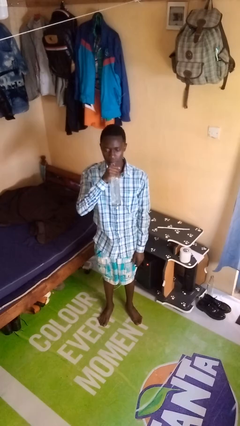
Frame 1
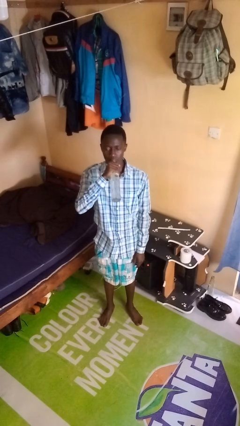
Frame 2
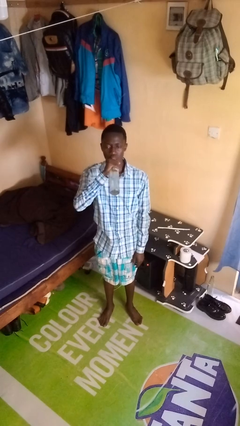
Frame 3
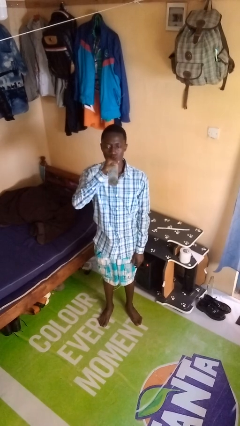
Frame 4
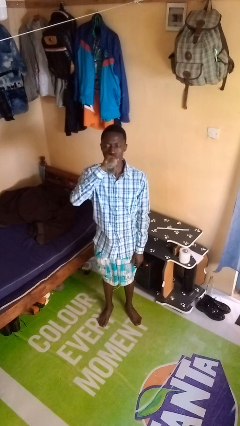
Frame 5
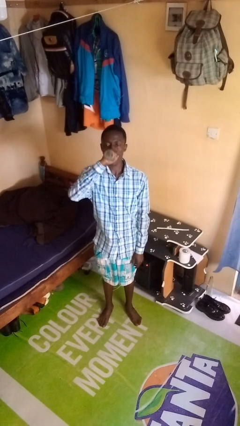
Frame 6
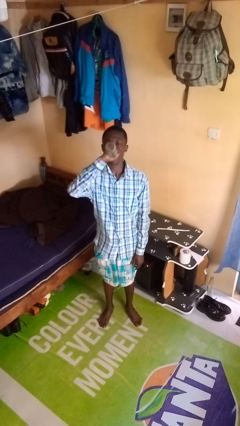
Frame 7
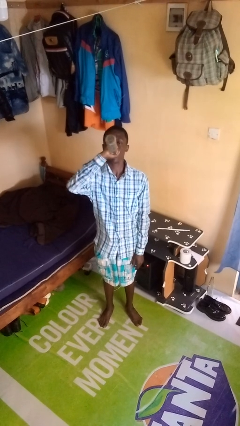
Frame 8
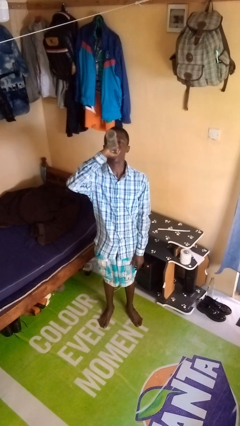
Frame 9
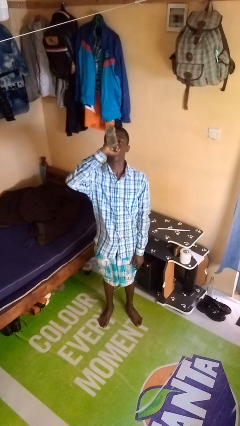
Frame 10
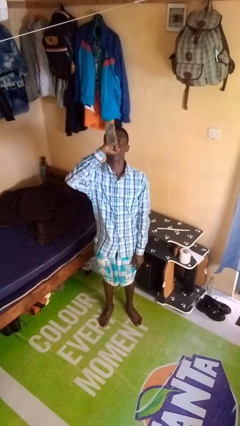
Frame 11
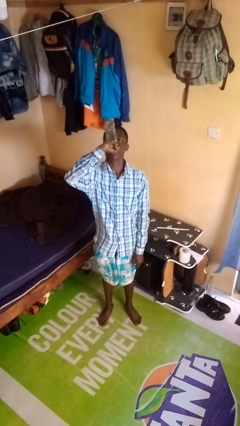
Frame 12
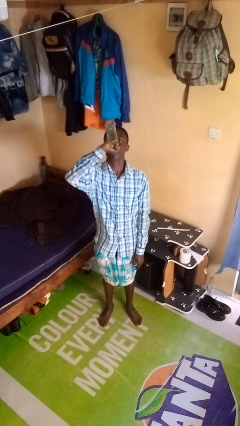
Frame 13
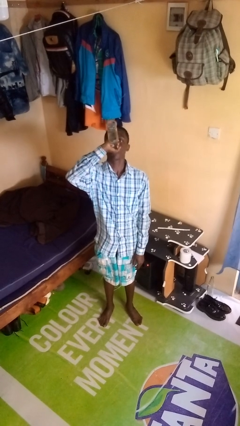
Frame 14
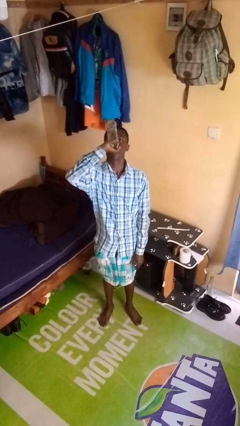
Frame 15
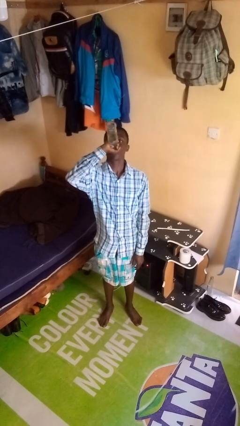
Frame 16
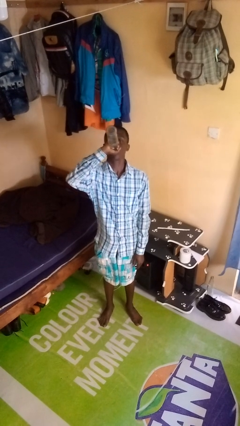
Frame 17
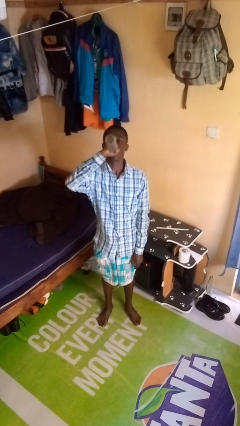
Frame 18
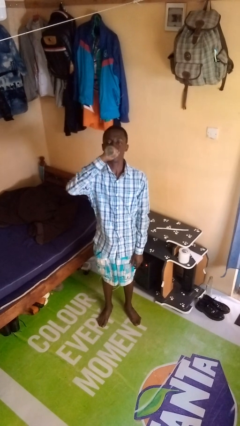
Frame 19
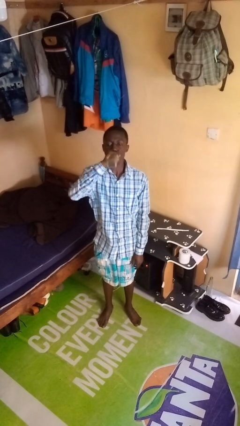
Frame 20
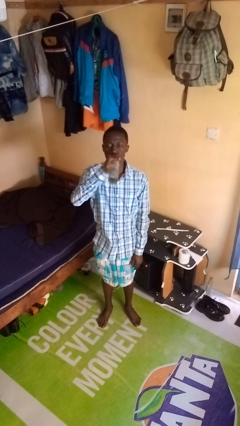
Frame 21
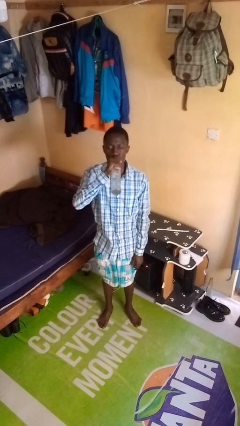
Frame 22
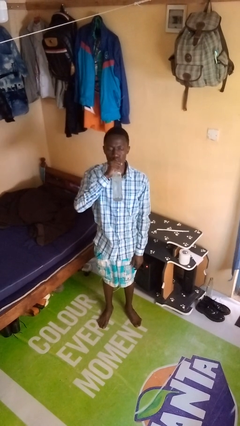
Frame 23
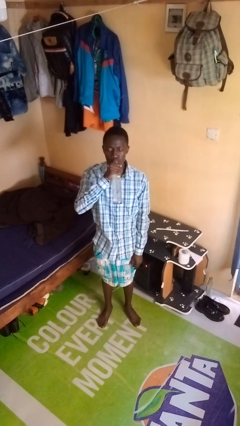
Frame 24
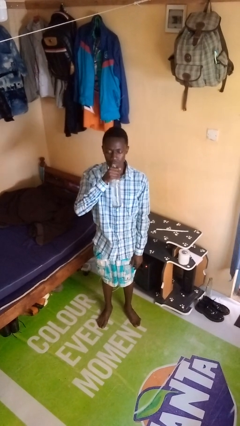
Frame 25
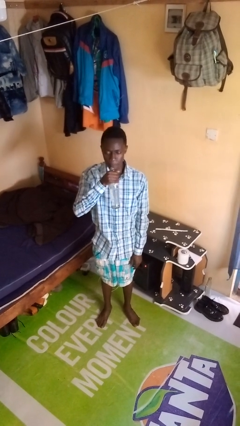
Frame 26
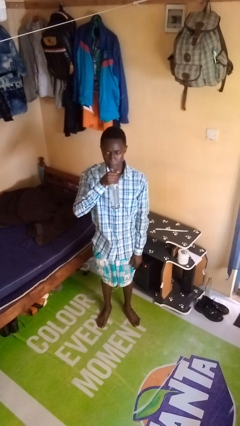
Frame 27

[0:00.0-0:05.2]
person drinks from bottle

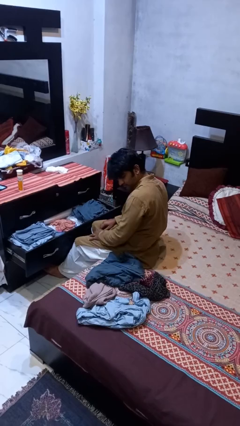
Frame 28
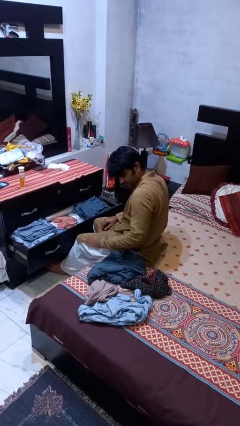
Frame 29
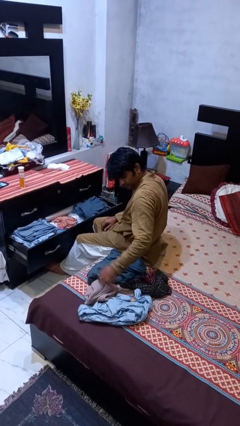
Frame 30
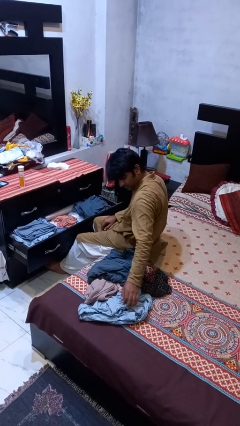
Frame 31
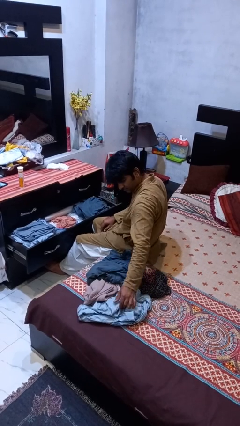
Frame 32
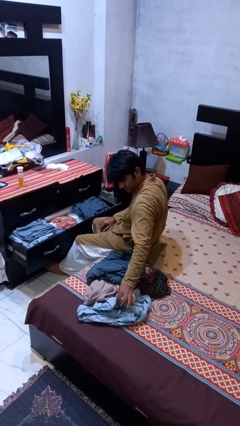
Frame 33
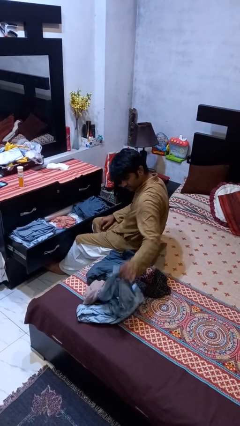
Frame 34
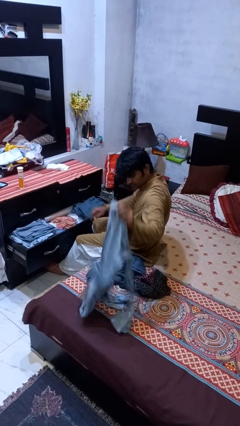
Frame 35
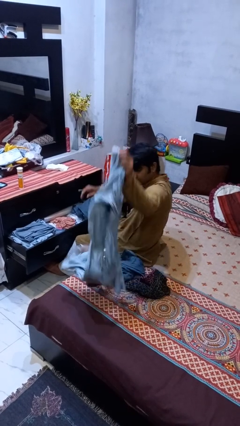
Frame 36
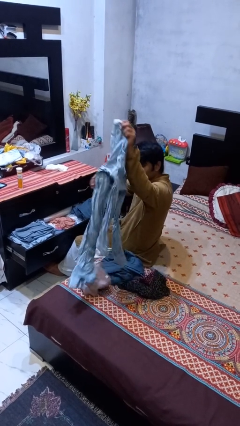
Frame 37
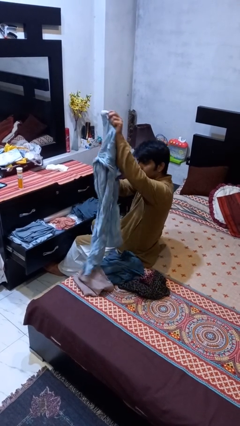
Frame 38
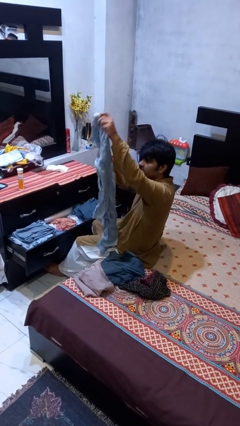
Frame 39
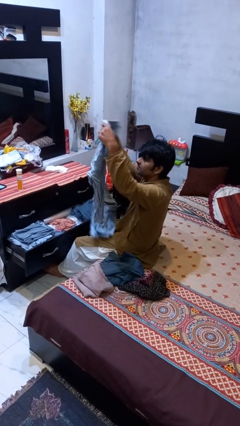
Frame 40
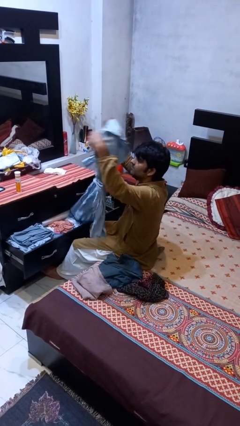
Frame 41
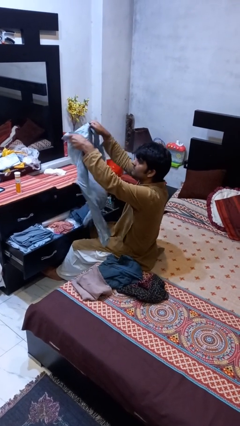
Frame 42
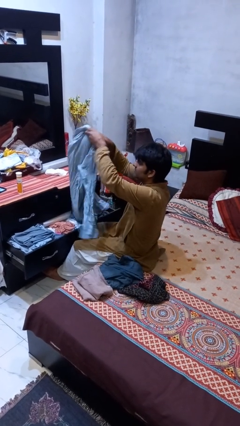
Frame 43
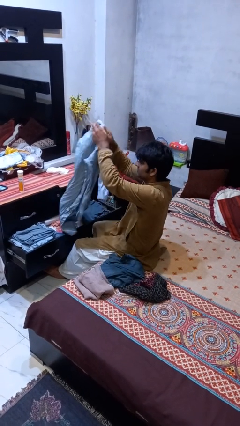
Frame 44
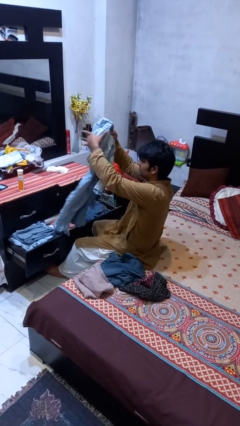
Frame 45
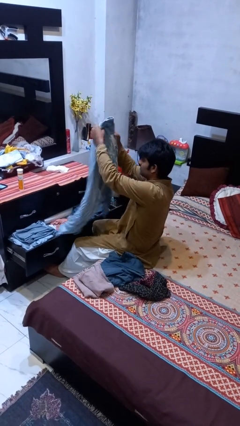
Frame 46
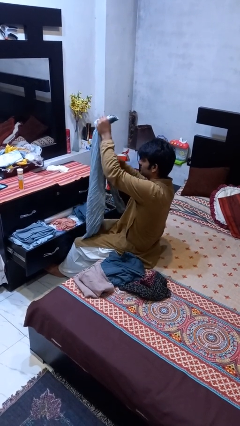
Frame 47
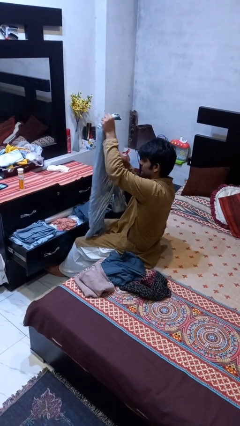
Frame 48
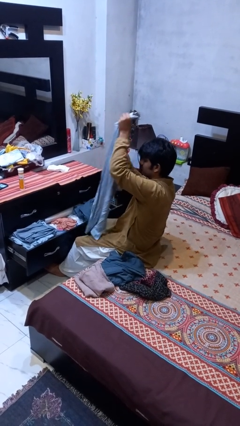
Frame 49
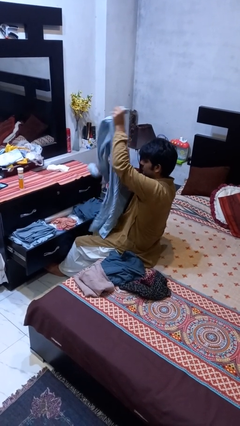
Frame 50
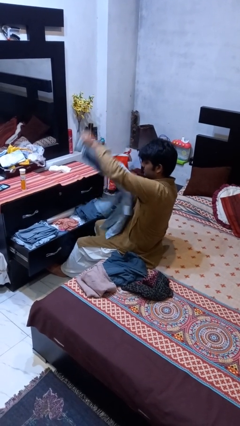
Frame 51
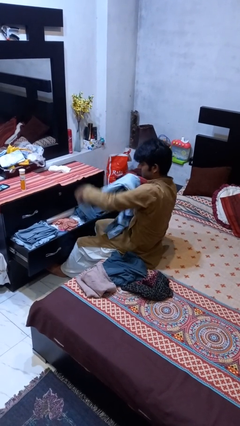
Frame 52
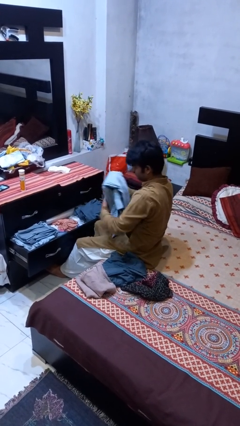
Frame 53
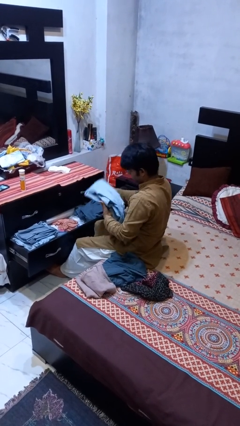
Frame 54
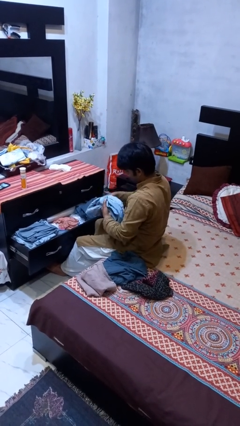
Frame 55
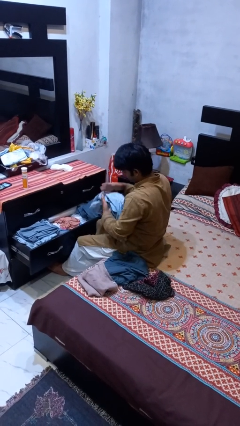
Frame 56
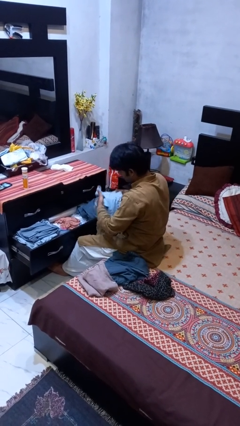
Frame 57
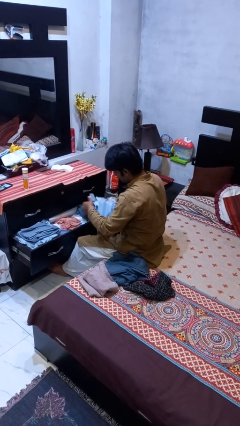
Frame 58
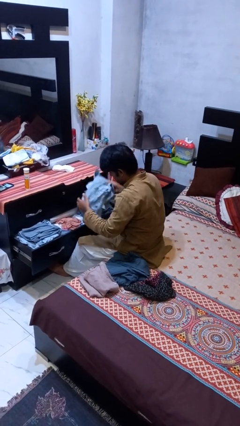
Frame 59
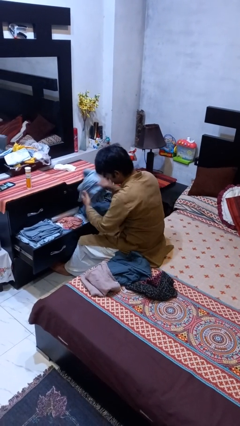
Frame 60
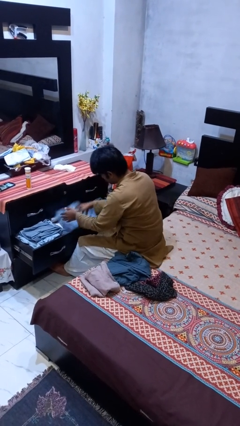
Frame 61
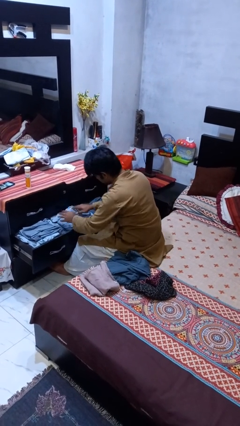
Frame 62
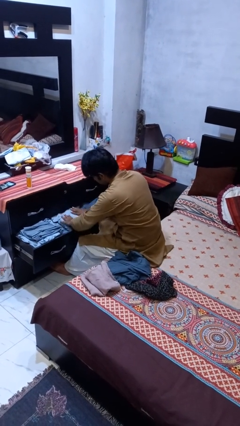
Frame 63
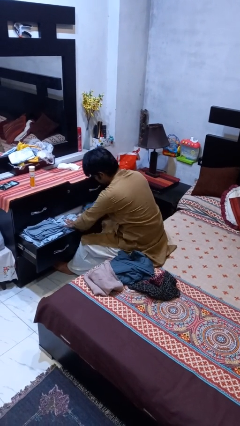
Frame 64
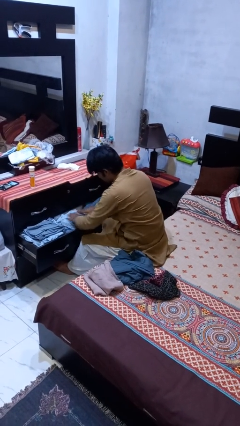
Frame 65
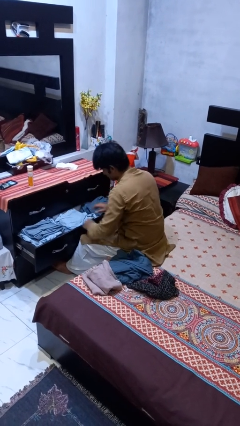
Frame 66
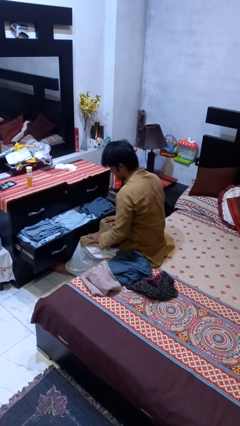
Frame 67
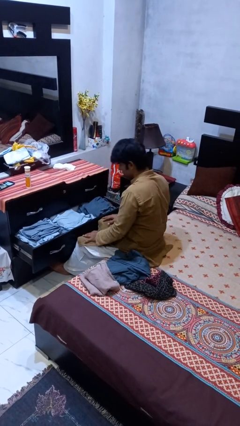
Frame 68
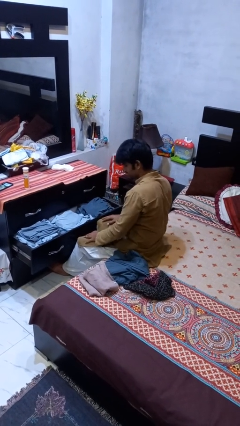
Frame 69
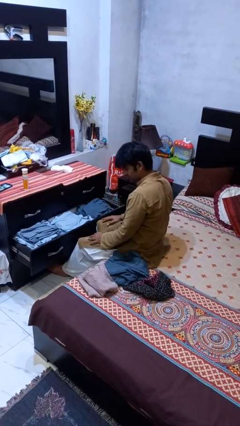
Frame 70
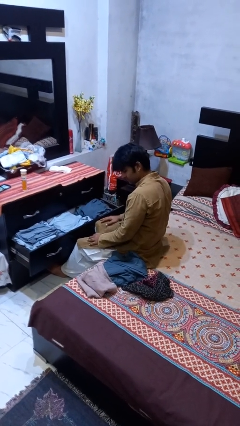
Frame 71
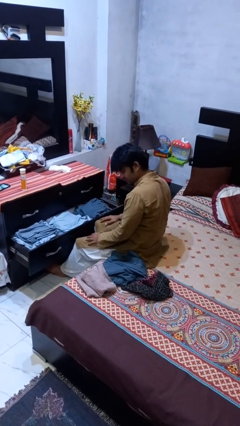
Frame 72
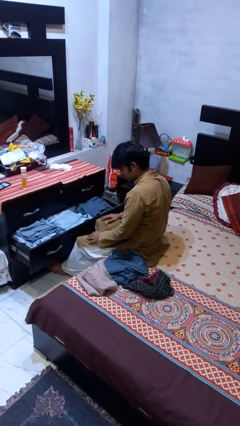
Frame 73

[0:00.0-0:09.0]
person puts clothes into dresser

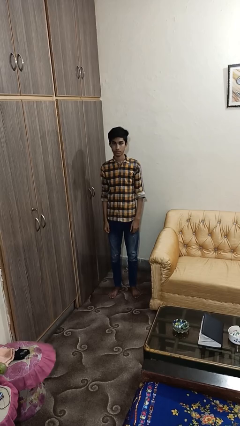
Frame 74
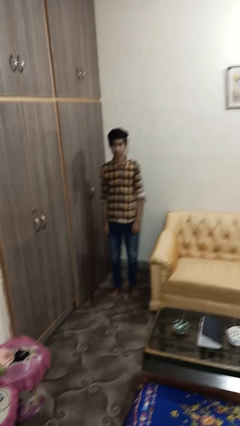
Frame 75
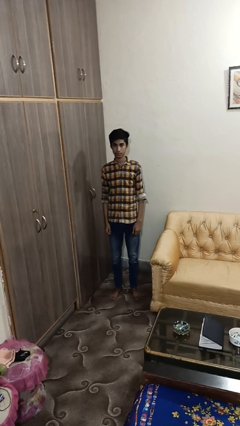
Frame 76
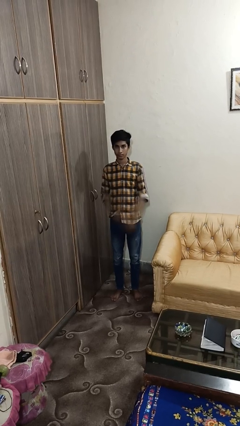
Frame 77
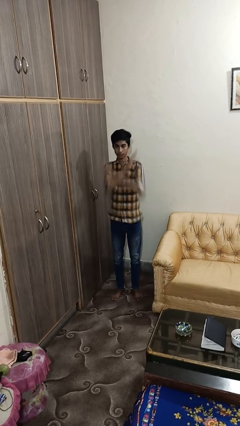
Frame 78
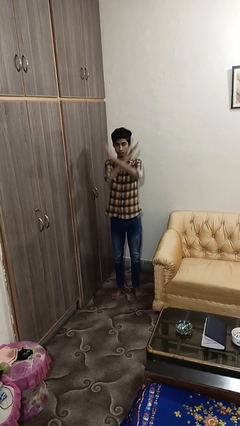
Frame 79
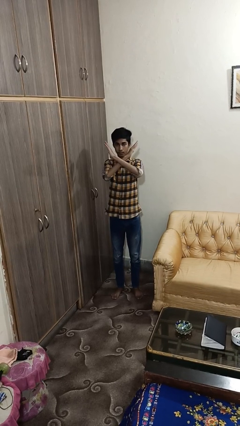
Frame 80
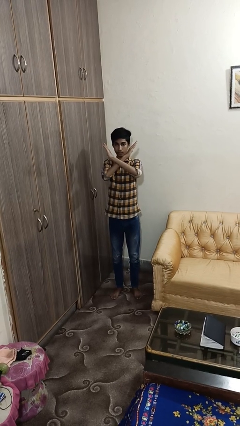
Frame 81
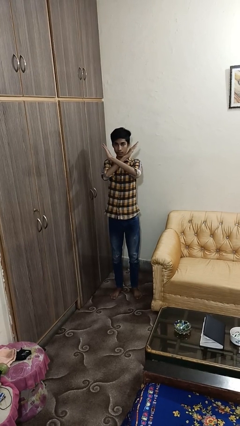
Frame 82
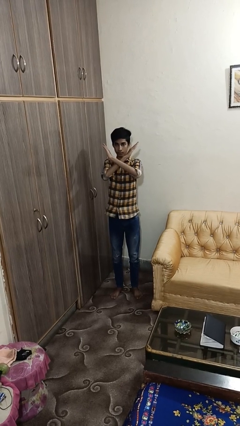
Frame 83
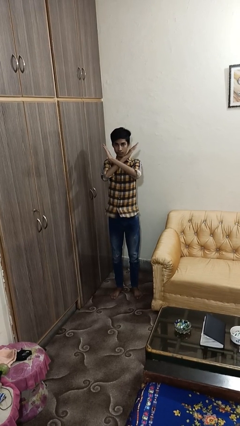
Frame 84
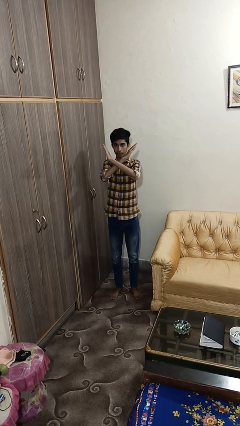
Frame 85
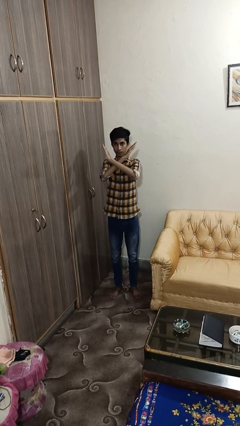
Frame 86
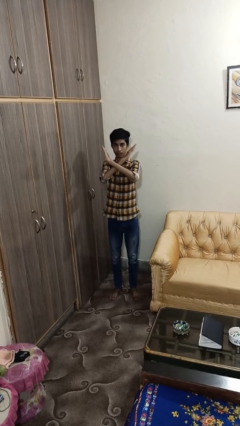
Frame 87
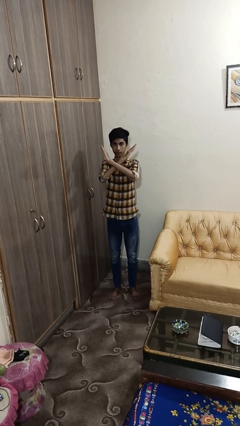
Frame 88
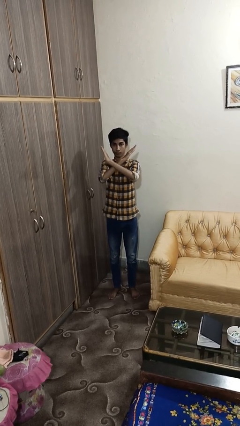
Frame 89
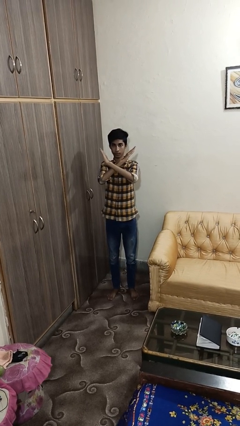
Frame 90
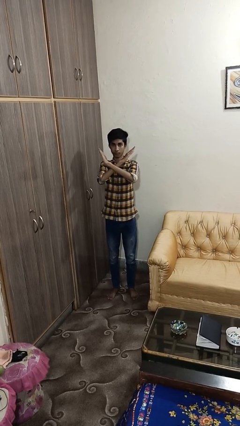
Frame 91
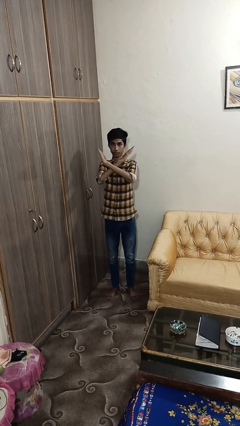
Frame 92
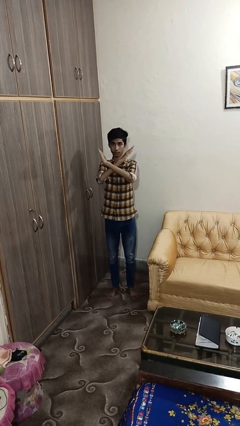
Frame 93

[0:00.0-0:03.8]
person gestures arms x

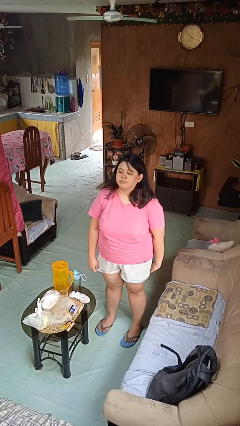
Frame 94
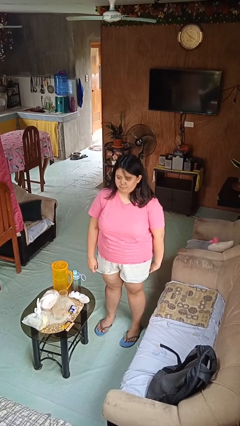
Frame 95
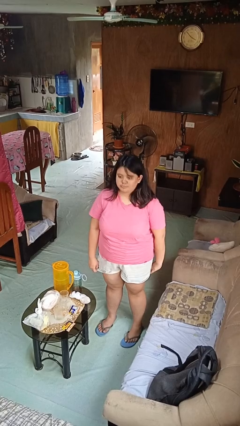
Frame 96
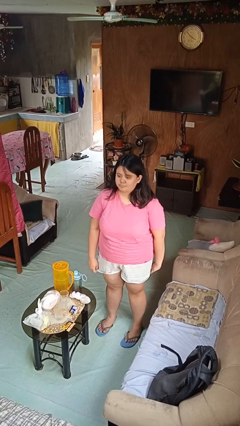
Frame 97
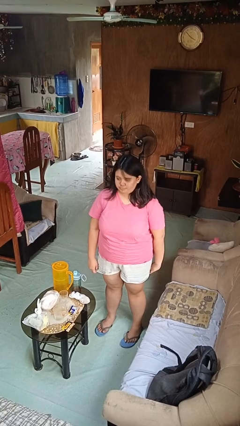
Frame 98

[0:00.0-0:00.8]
person nods head
